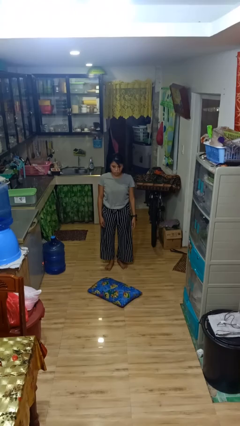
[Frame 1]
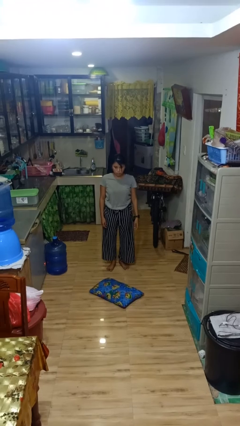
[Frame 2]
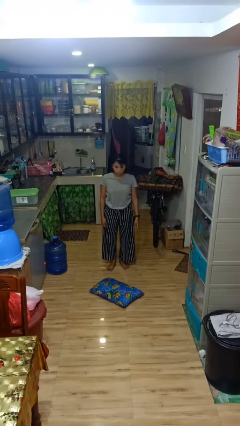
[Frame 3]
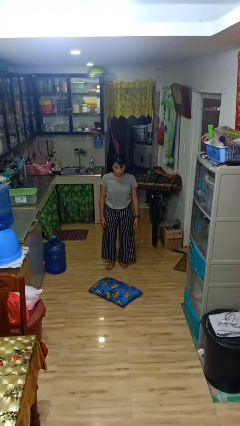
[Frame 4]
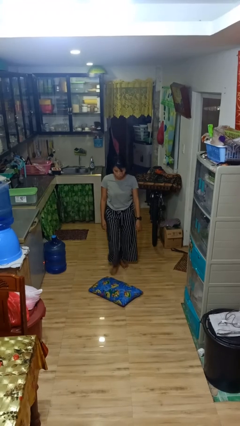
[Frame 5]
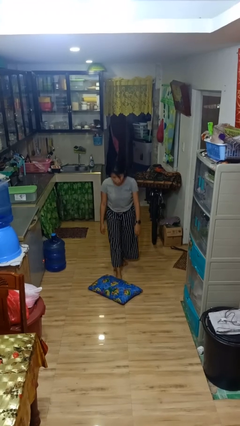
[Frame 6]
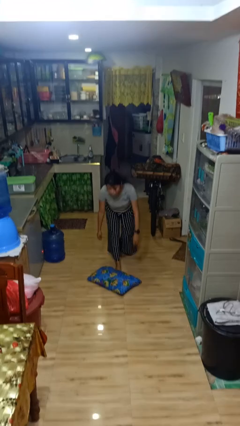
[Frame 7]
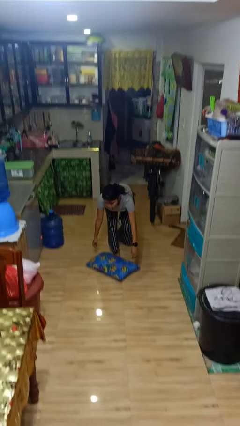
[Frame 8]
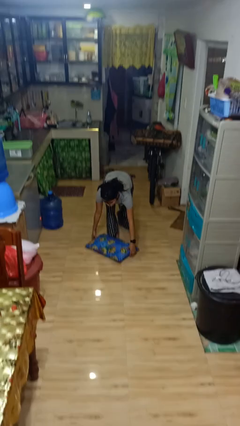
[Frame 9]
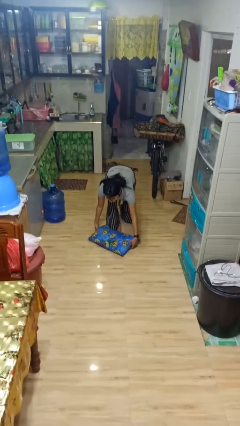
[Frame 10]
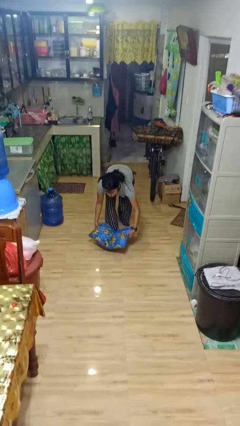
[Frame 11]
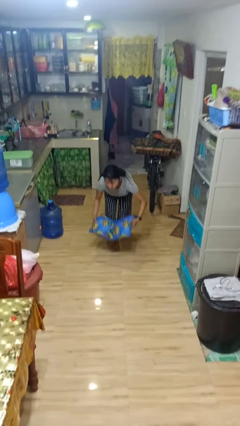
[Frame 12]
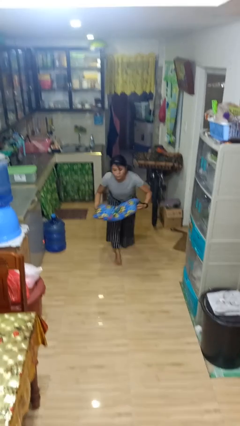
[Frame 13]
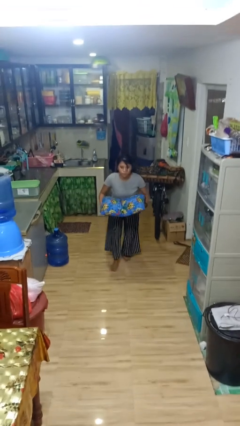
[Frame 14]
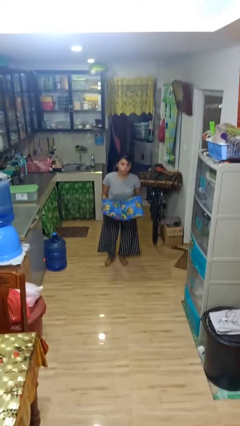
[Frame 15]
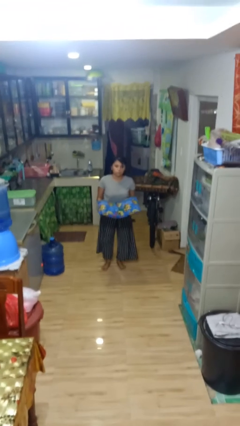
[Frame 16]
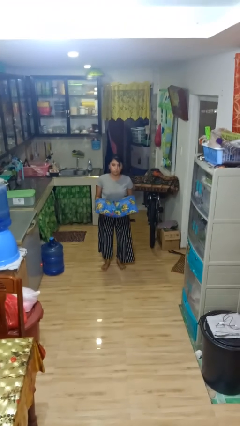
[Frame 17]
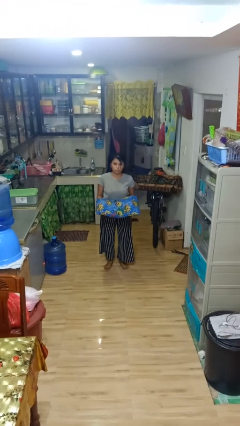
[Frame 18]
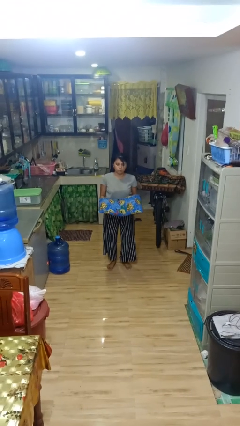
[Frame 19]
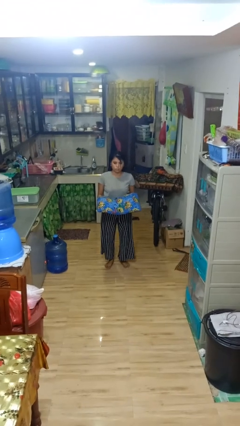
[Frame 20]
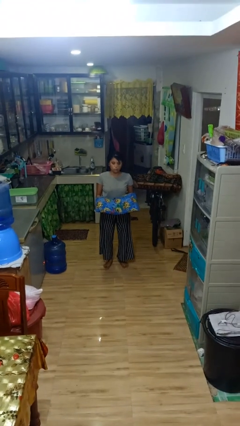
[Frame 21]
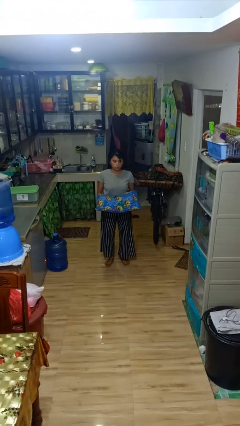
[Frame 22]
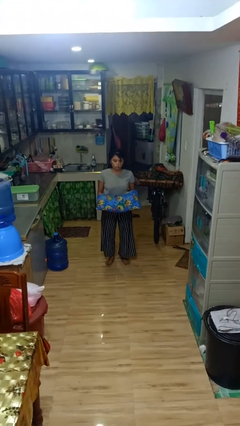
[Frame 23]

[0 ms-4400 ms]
person picks up object from floor

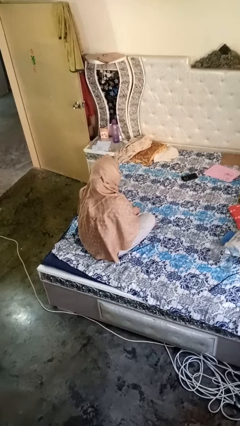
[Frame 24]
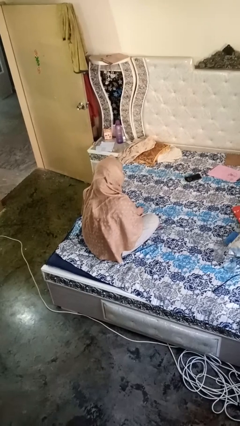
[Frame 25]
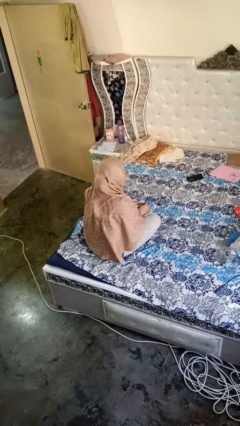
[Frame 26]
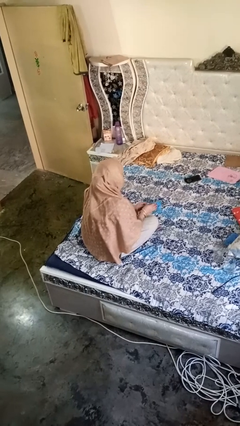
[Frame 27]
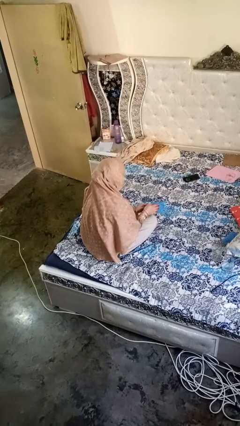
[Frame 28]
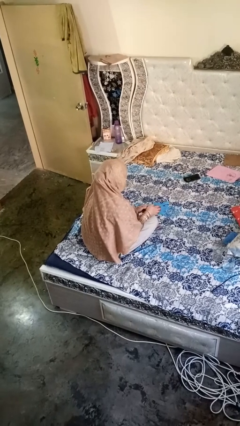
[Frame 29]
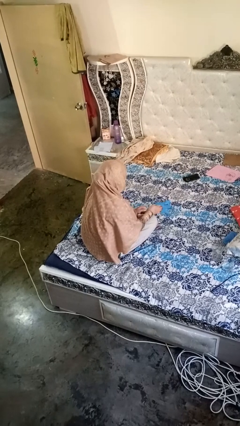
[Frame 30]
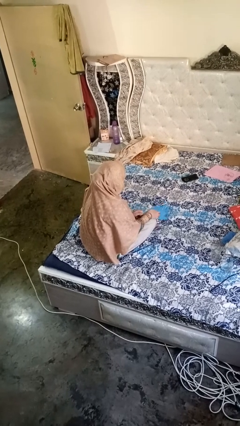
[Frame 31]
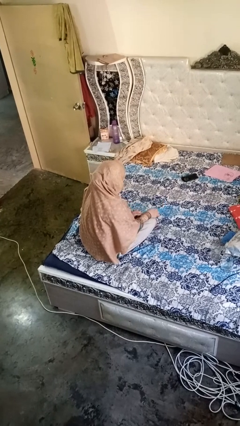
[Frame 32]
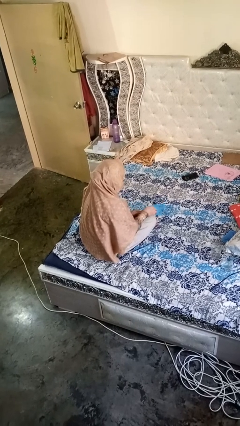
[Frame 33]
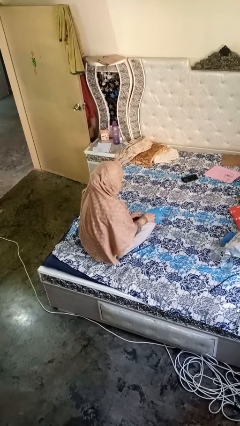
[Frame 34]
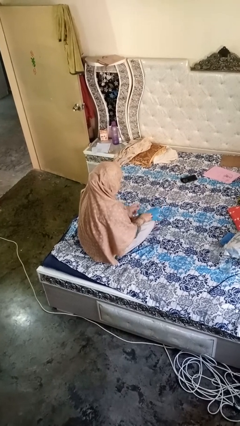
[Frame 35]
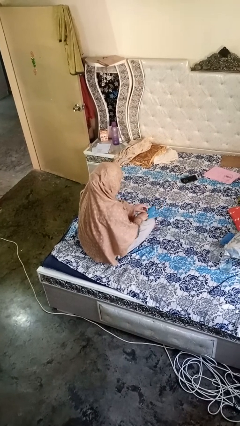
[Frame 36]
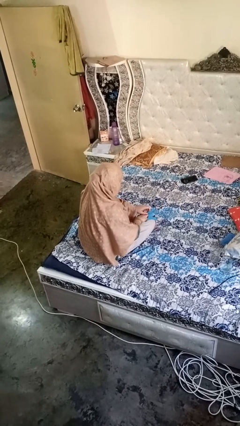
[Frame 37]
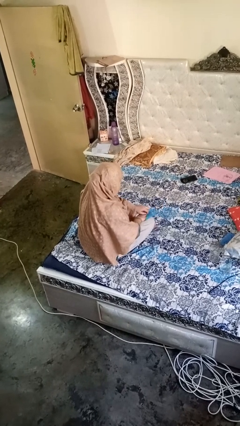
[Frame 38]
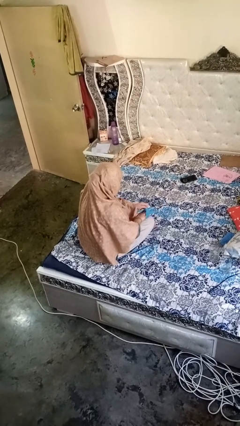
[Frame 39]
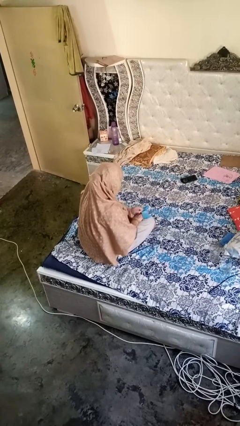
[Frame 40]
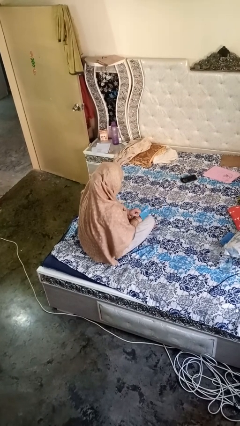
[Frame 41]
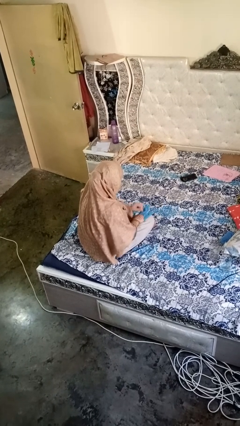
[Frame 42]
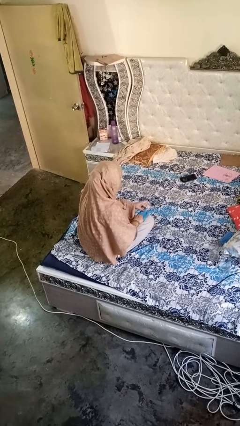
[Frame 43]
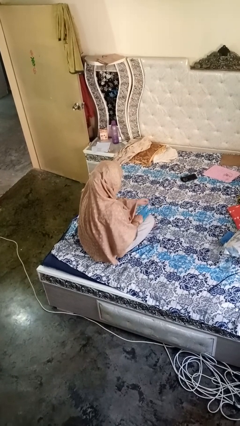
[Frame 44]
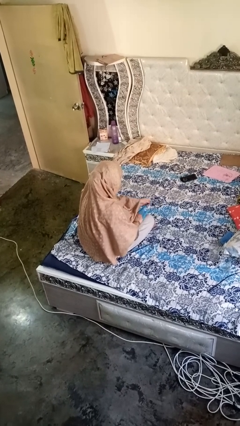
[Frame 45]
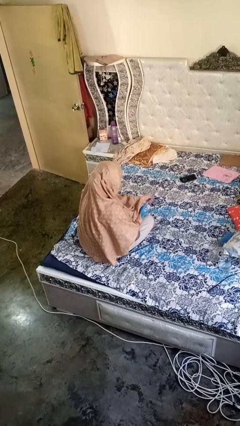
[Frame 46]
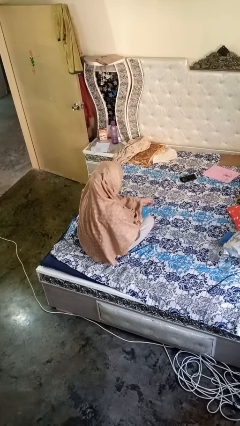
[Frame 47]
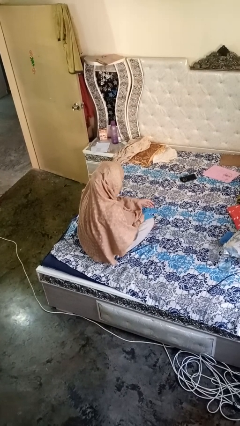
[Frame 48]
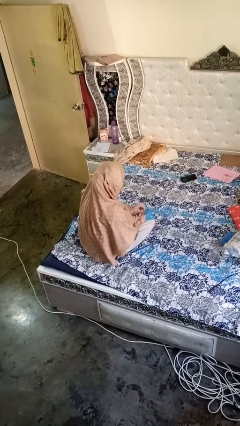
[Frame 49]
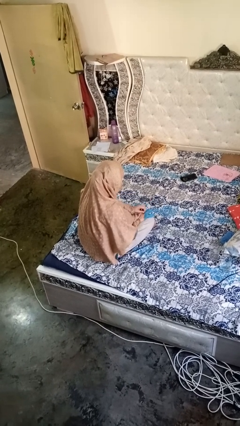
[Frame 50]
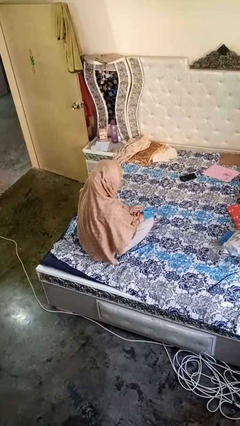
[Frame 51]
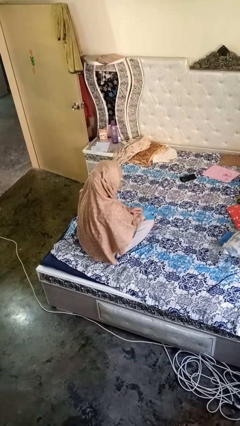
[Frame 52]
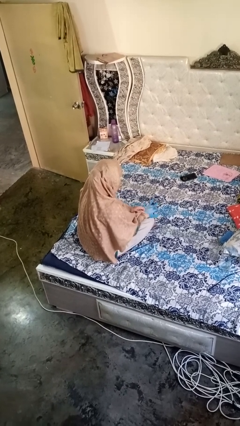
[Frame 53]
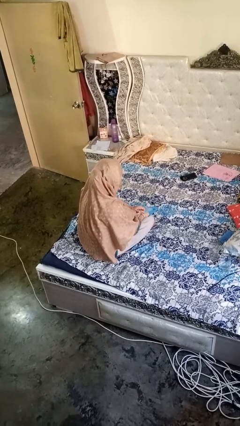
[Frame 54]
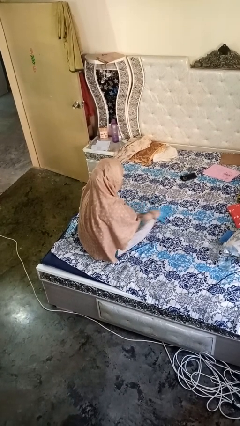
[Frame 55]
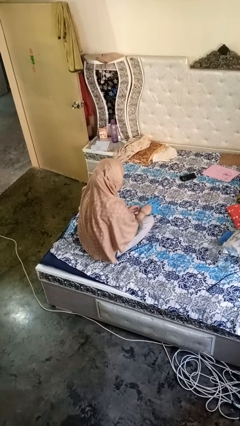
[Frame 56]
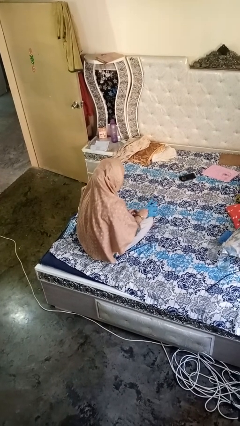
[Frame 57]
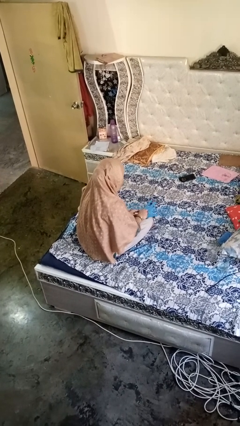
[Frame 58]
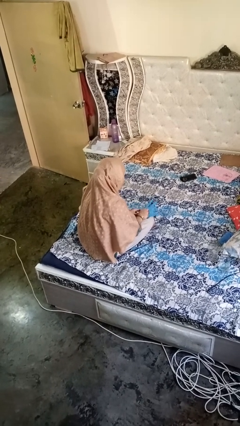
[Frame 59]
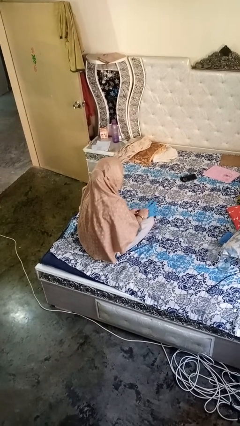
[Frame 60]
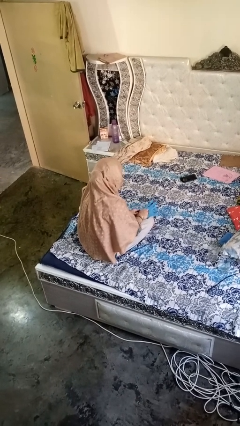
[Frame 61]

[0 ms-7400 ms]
person puts on gloves

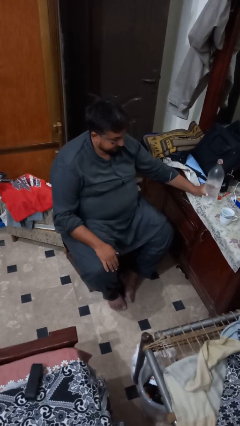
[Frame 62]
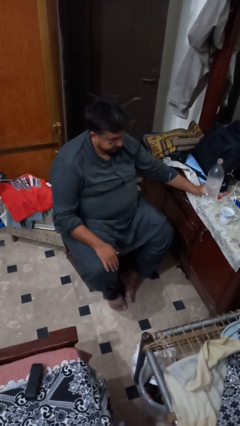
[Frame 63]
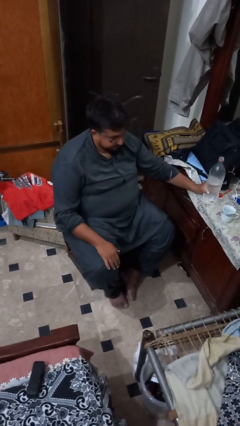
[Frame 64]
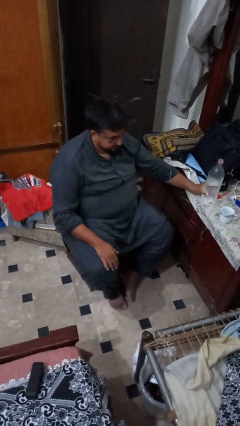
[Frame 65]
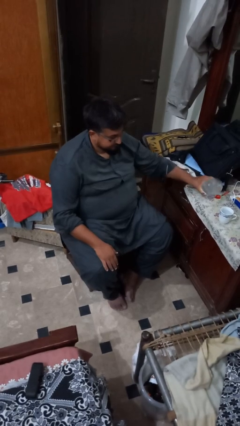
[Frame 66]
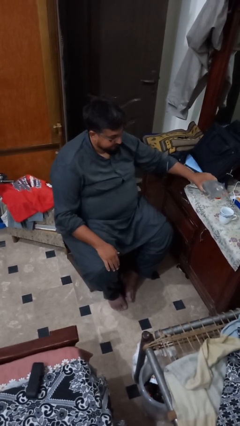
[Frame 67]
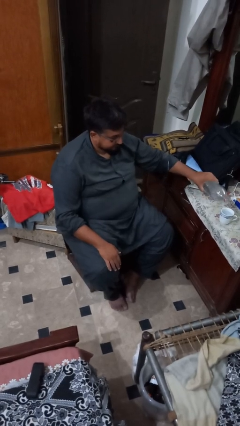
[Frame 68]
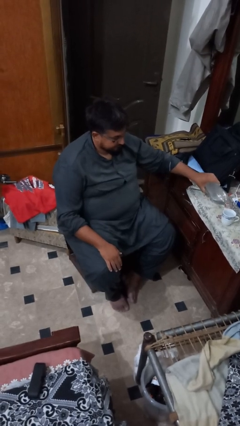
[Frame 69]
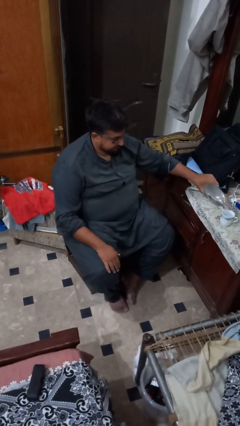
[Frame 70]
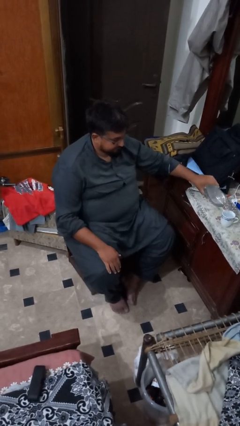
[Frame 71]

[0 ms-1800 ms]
person pours liquid into cup

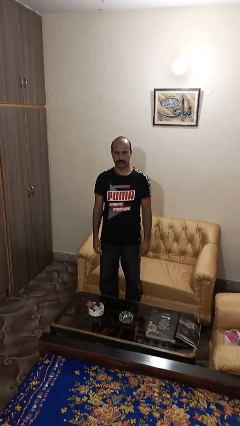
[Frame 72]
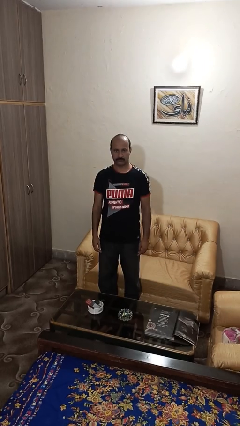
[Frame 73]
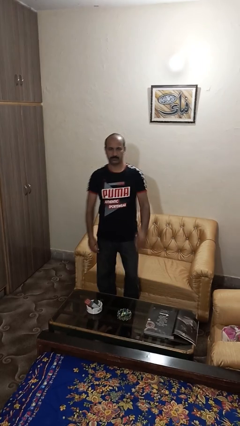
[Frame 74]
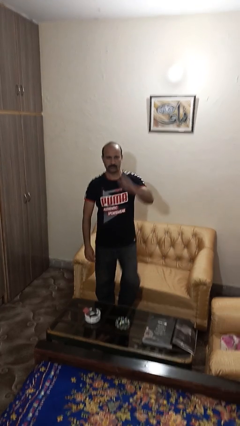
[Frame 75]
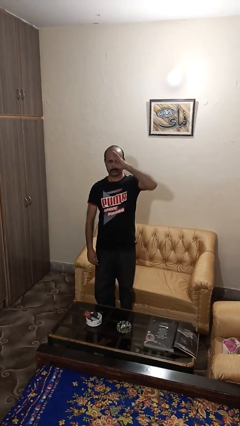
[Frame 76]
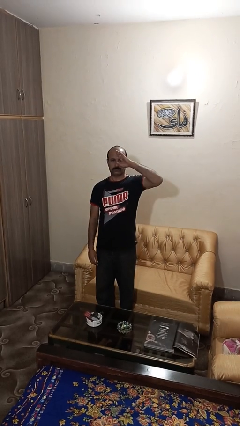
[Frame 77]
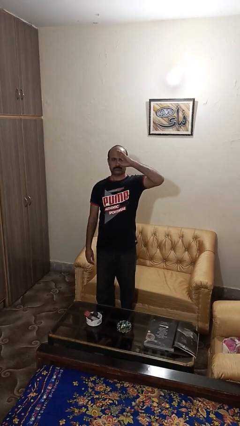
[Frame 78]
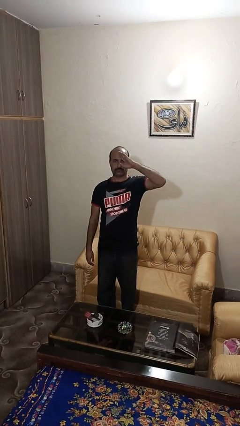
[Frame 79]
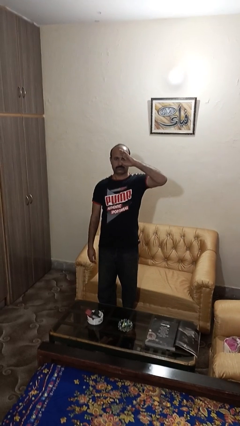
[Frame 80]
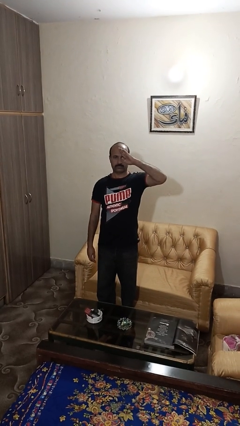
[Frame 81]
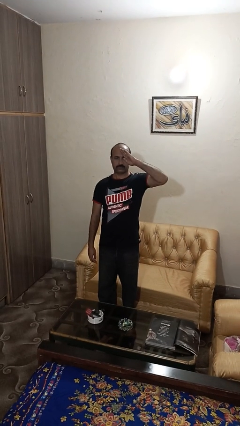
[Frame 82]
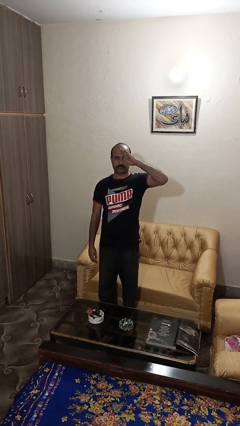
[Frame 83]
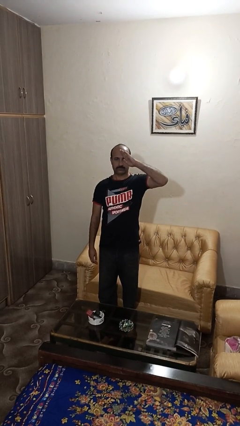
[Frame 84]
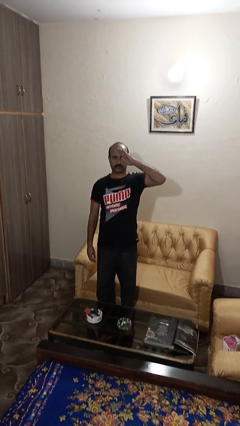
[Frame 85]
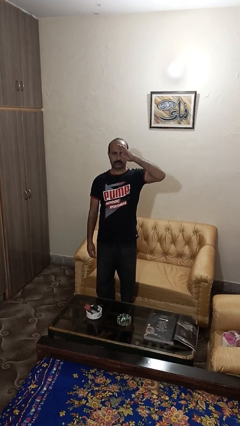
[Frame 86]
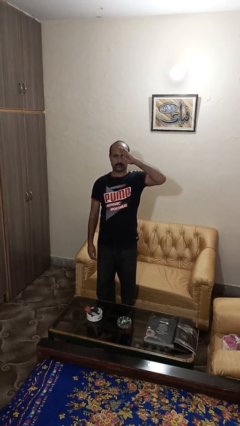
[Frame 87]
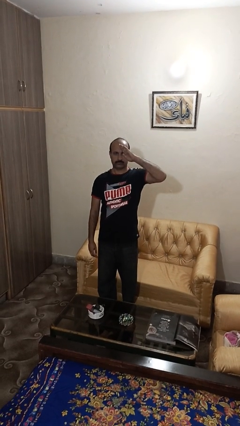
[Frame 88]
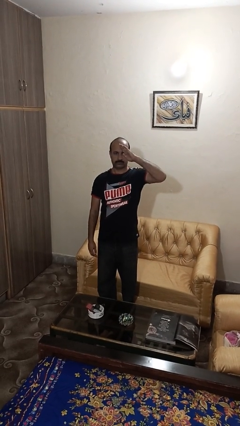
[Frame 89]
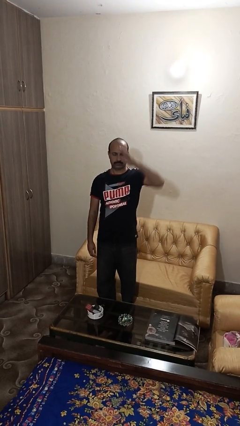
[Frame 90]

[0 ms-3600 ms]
person salutes

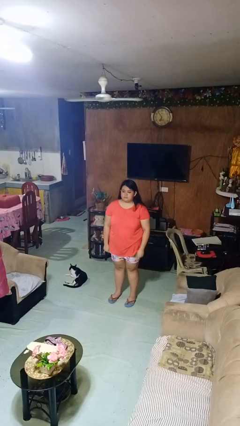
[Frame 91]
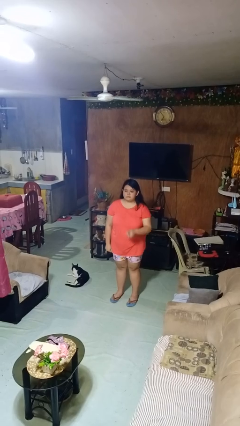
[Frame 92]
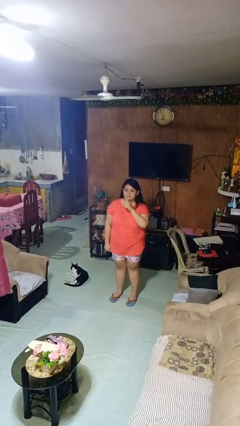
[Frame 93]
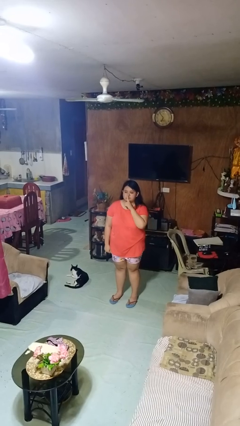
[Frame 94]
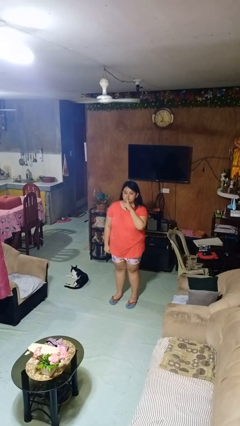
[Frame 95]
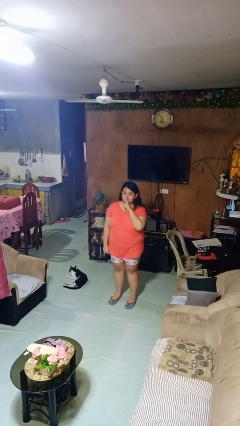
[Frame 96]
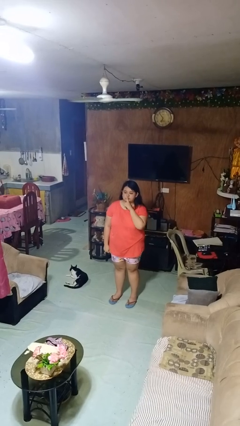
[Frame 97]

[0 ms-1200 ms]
person gestures be quiet
